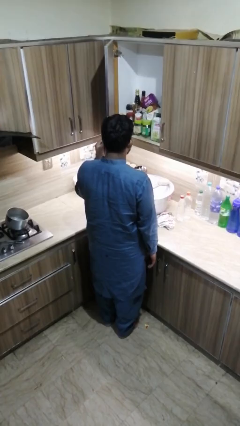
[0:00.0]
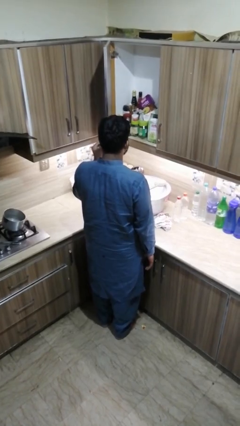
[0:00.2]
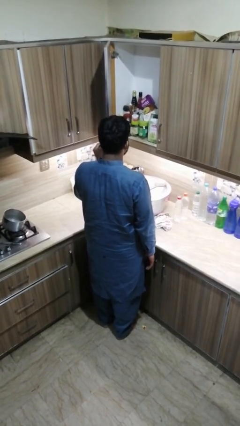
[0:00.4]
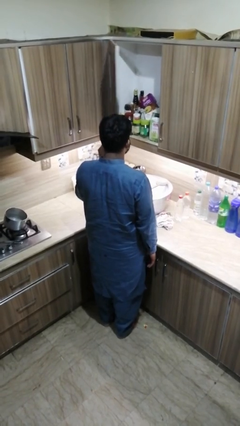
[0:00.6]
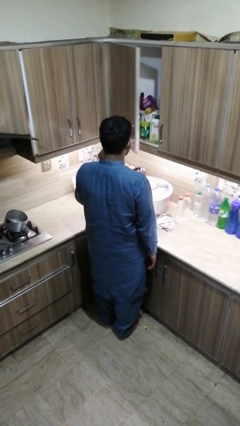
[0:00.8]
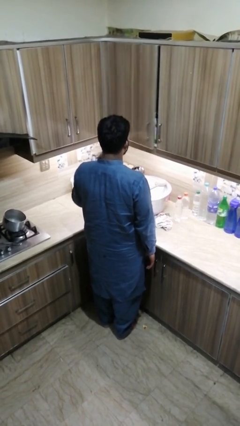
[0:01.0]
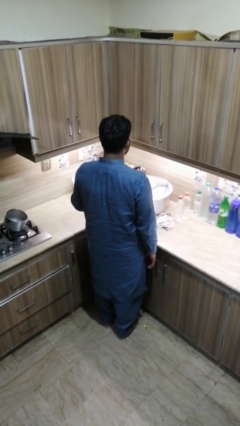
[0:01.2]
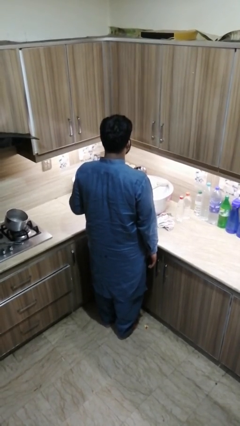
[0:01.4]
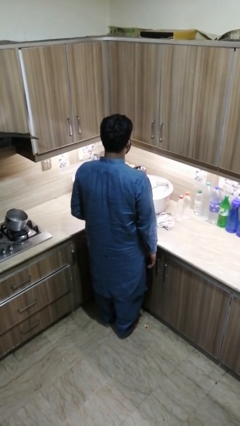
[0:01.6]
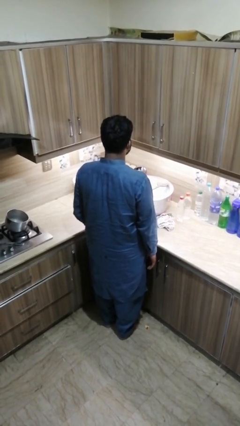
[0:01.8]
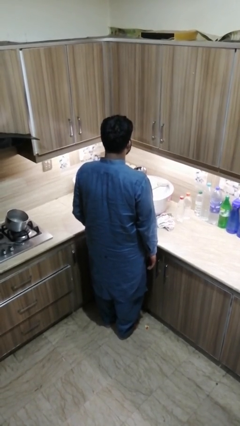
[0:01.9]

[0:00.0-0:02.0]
person closes kitchen drawer

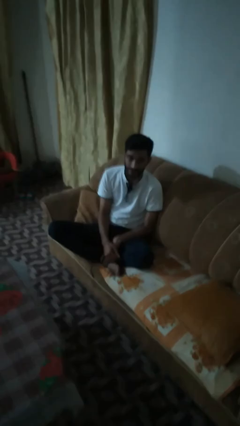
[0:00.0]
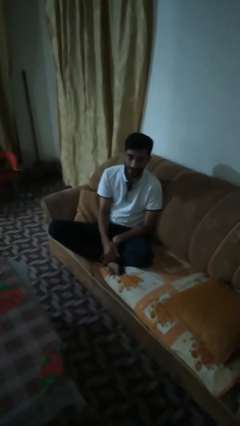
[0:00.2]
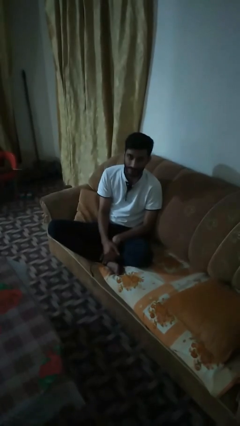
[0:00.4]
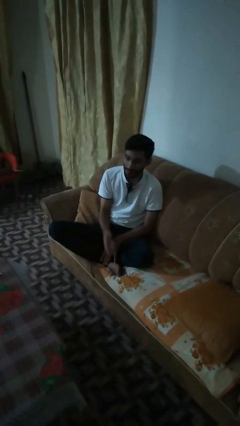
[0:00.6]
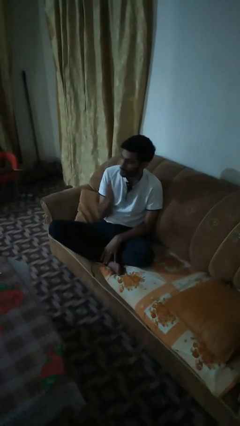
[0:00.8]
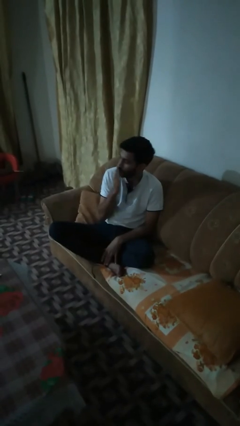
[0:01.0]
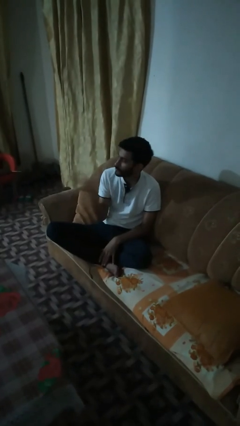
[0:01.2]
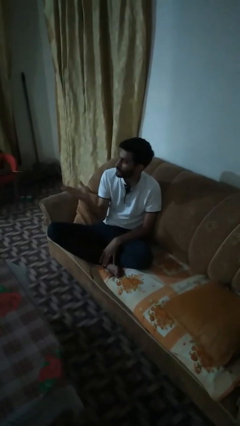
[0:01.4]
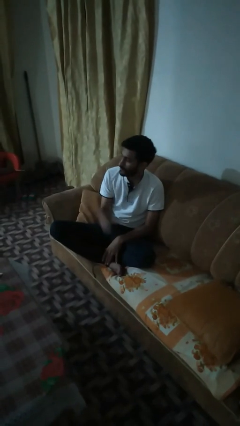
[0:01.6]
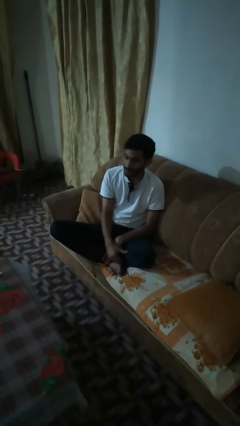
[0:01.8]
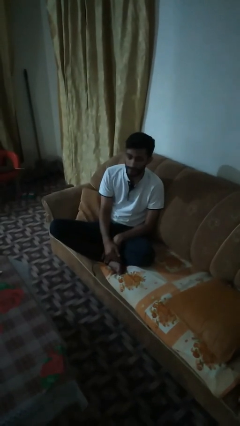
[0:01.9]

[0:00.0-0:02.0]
person gestures blow kiss

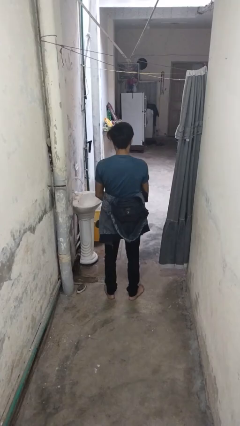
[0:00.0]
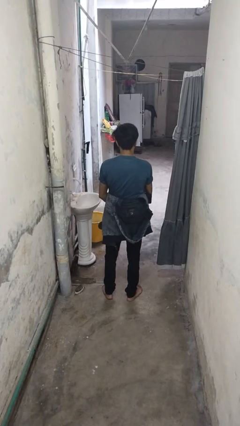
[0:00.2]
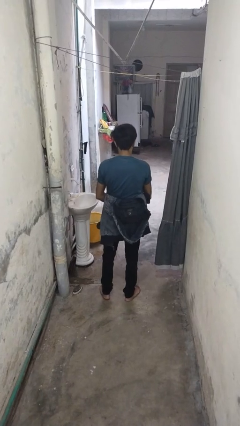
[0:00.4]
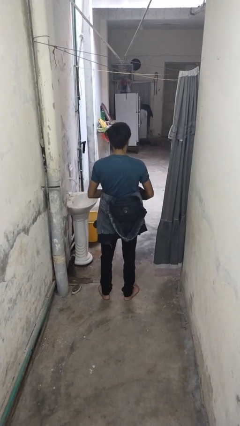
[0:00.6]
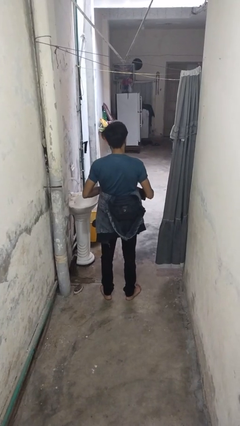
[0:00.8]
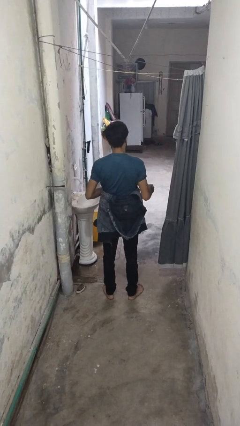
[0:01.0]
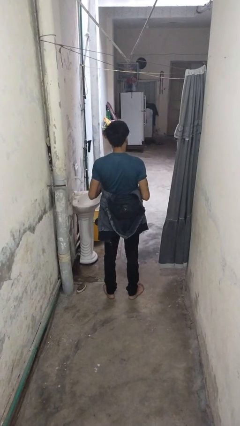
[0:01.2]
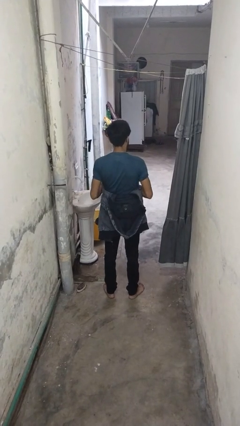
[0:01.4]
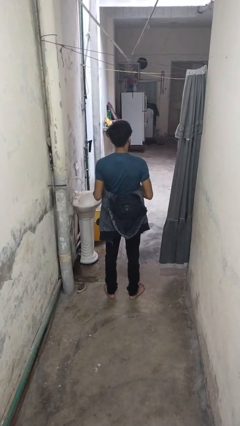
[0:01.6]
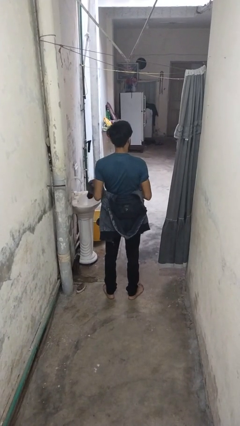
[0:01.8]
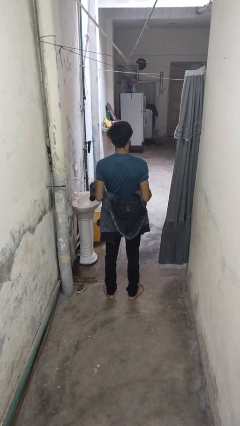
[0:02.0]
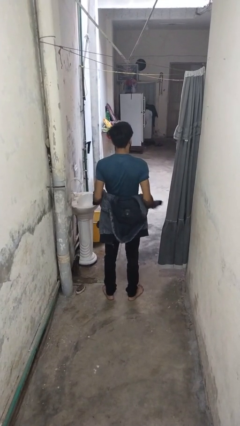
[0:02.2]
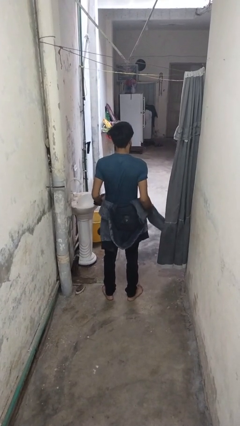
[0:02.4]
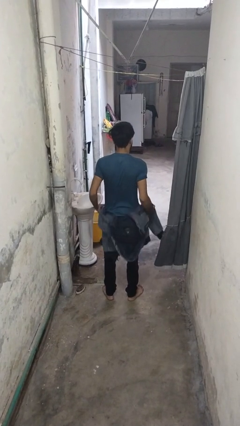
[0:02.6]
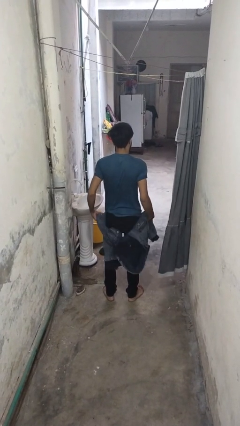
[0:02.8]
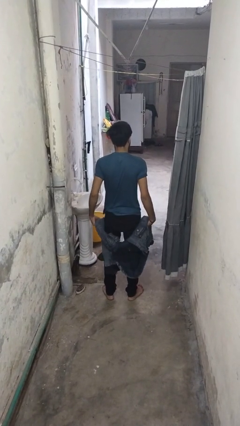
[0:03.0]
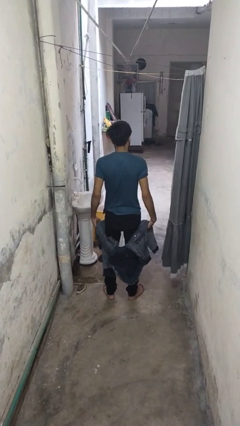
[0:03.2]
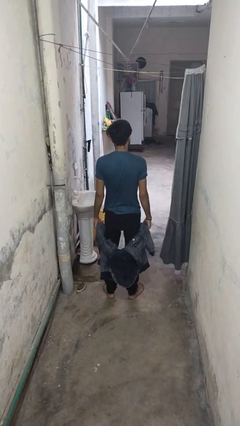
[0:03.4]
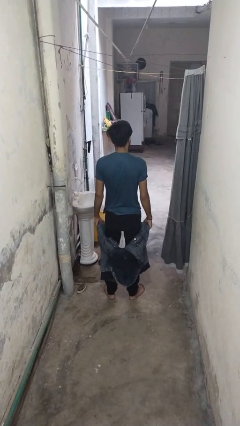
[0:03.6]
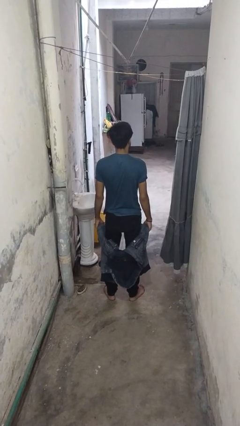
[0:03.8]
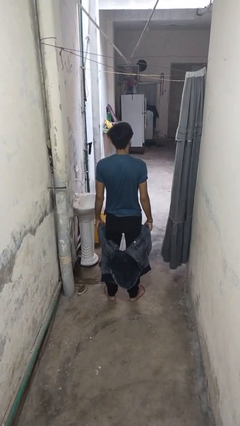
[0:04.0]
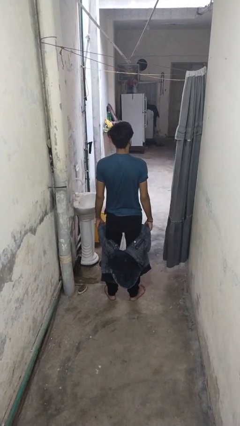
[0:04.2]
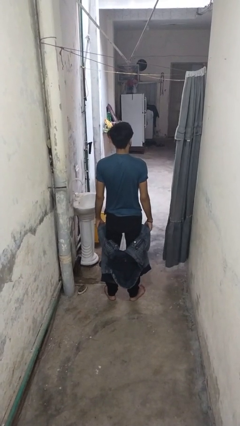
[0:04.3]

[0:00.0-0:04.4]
person unties jacket around waist

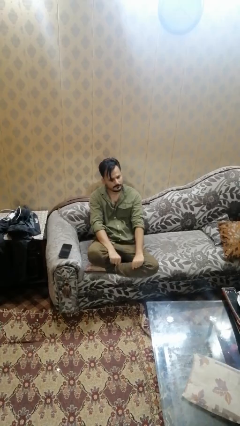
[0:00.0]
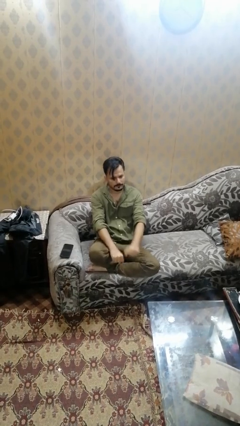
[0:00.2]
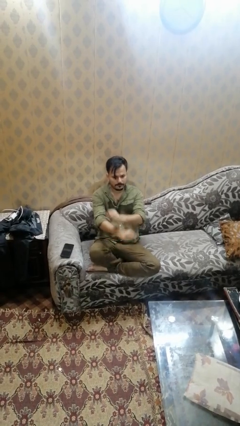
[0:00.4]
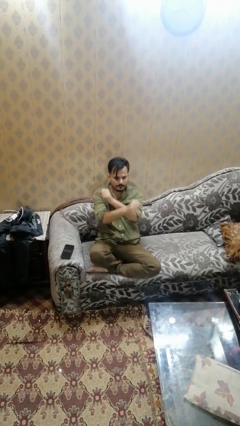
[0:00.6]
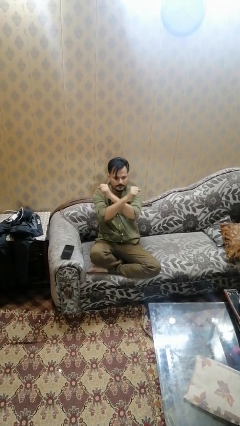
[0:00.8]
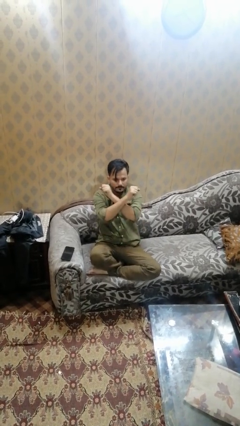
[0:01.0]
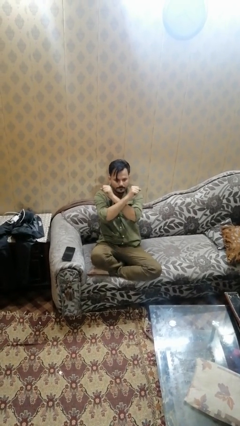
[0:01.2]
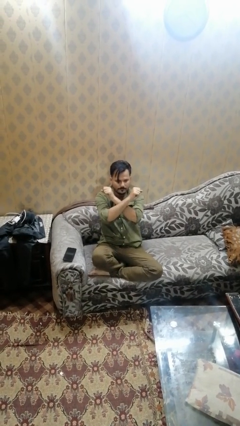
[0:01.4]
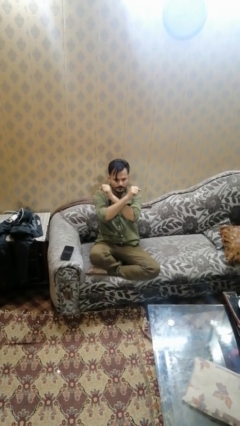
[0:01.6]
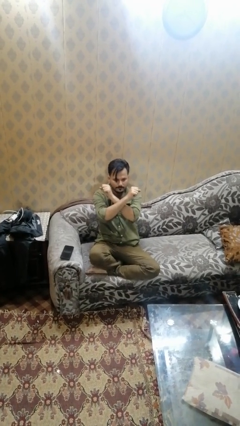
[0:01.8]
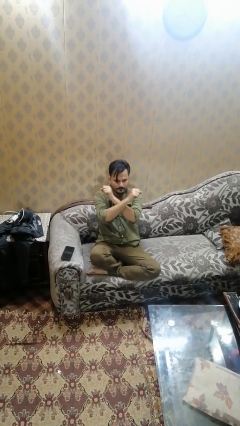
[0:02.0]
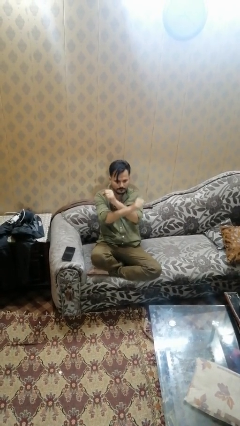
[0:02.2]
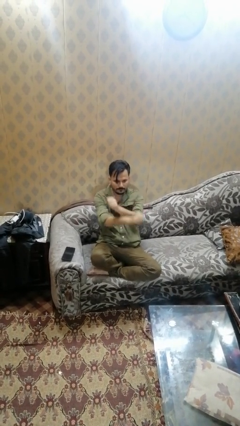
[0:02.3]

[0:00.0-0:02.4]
person gestures arms x

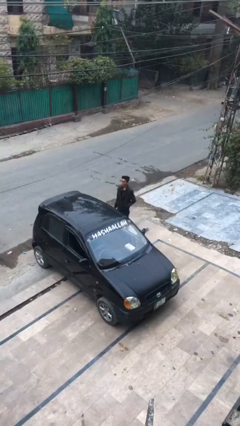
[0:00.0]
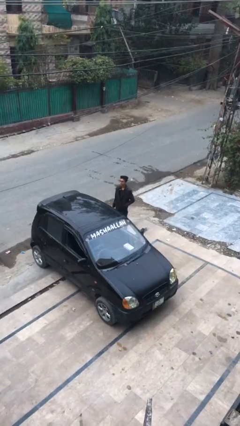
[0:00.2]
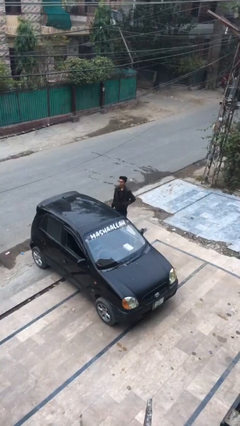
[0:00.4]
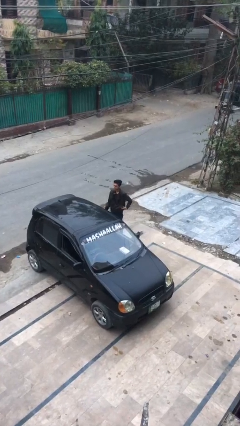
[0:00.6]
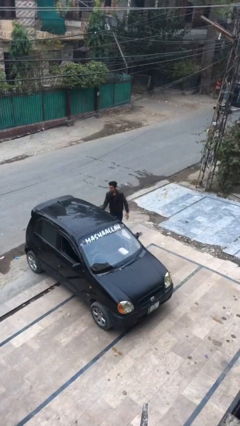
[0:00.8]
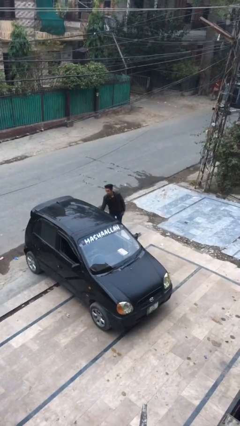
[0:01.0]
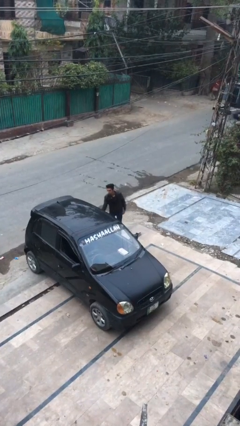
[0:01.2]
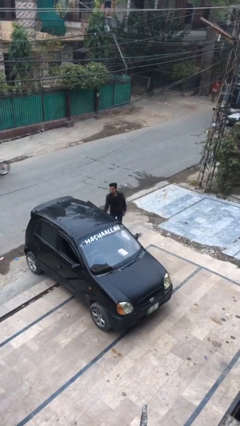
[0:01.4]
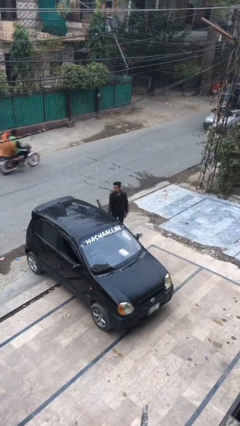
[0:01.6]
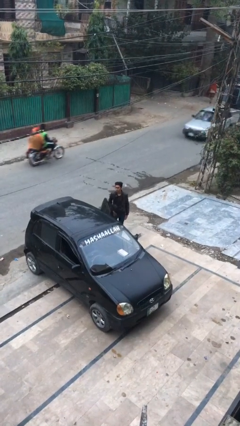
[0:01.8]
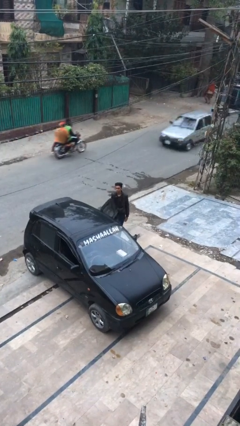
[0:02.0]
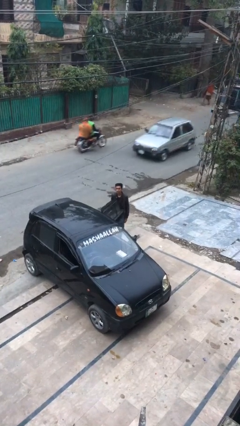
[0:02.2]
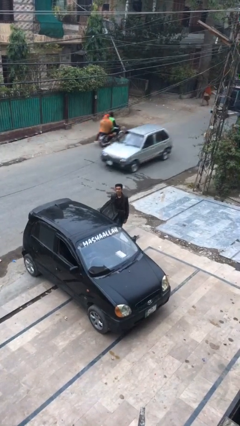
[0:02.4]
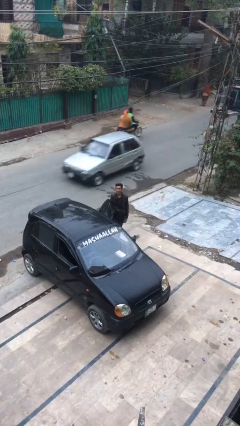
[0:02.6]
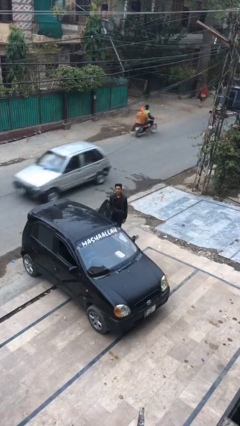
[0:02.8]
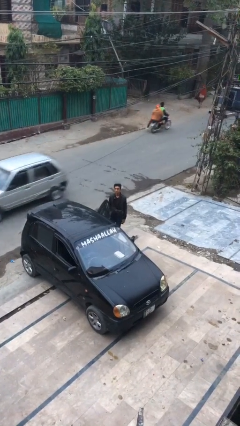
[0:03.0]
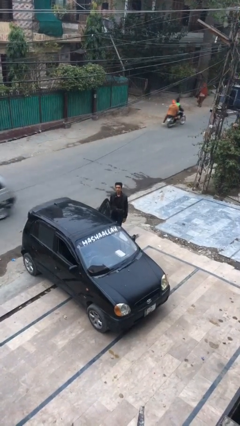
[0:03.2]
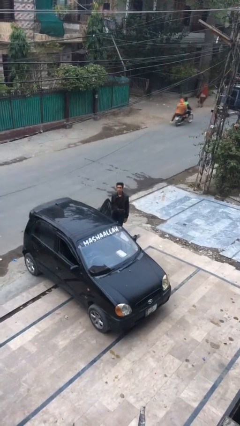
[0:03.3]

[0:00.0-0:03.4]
person opens car door

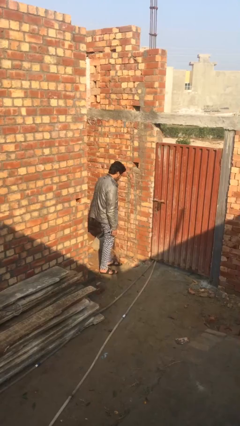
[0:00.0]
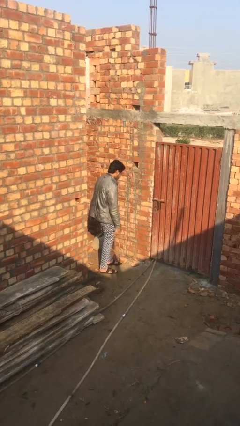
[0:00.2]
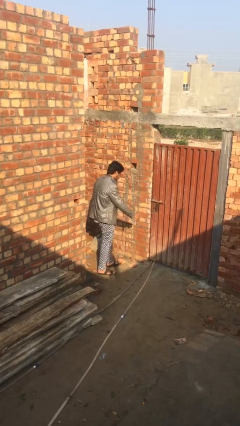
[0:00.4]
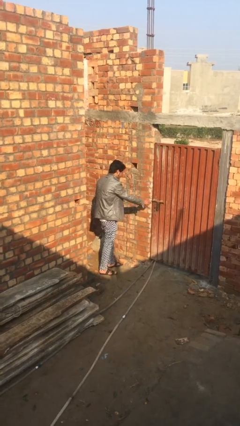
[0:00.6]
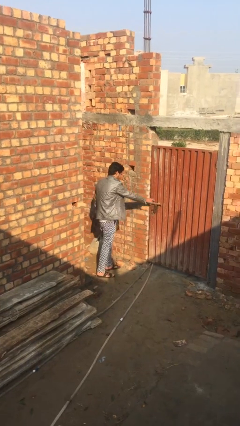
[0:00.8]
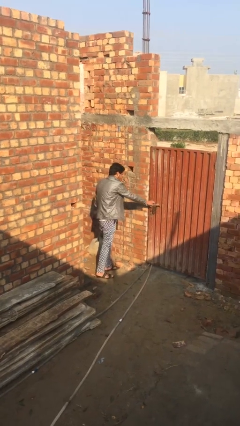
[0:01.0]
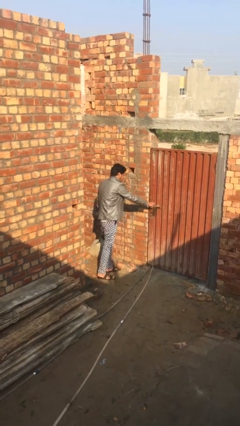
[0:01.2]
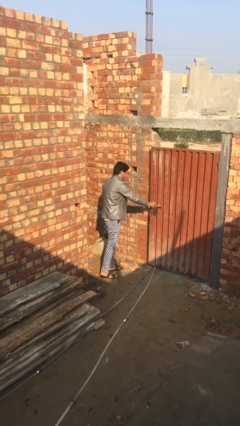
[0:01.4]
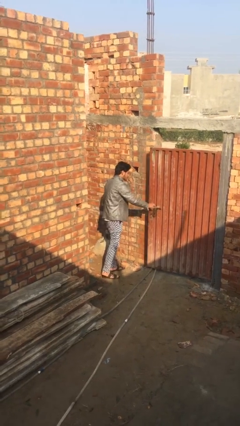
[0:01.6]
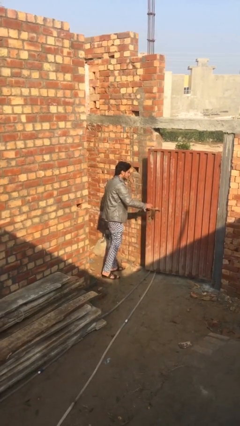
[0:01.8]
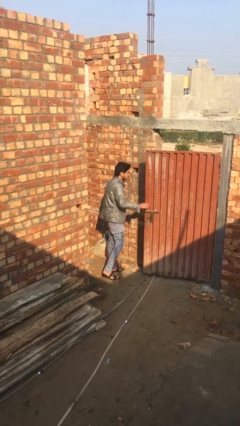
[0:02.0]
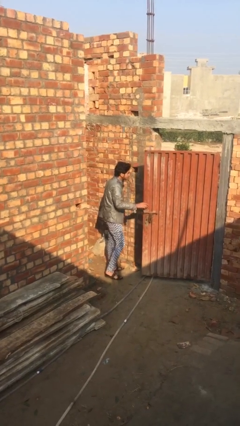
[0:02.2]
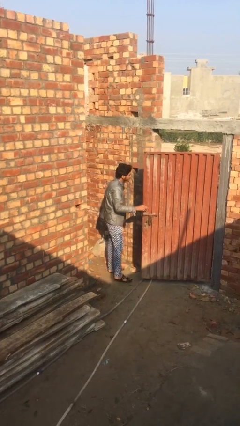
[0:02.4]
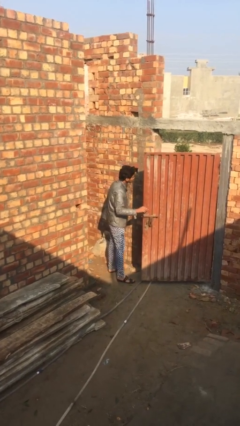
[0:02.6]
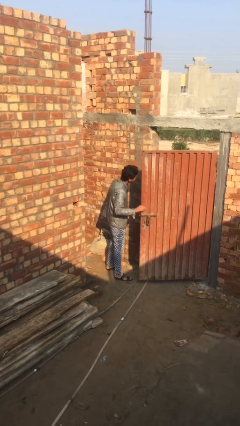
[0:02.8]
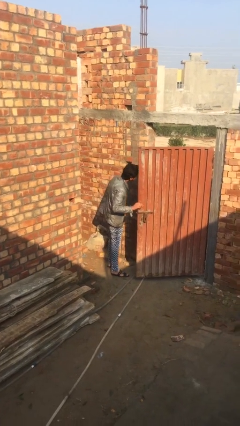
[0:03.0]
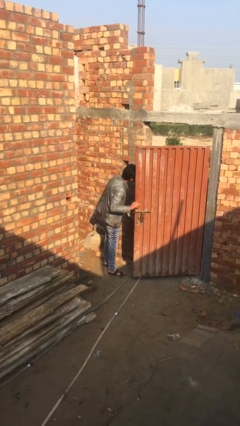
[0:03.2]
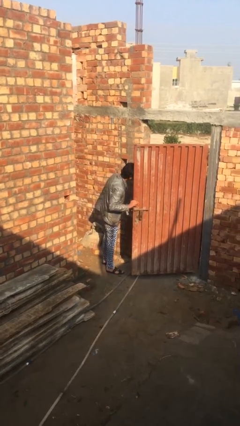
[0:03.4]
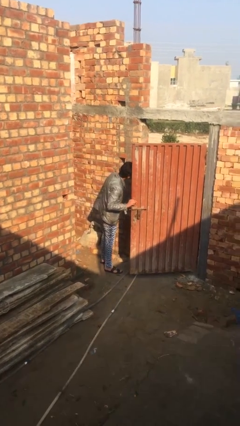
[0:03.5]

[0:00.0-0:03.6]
person opens facility door
